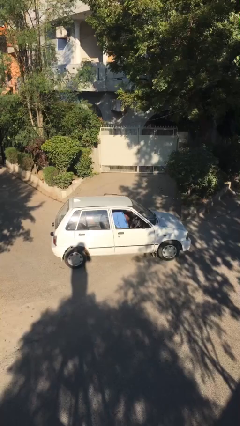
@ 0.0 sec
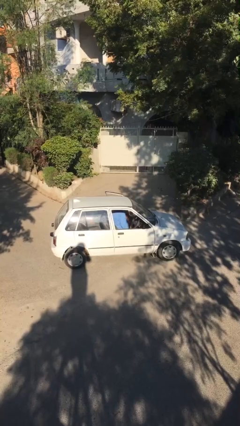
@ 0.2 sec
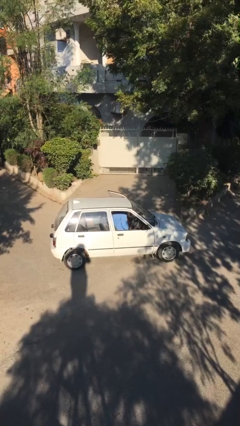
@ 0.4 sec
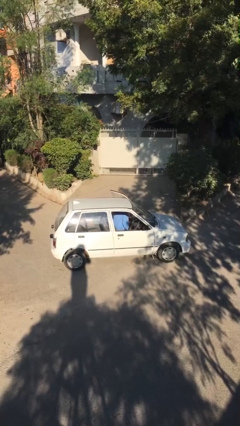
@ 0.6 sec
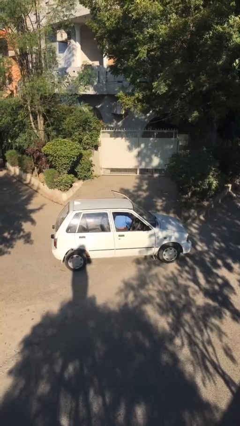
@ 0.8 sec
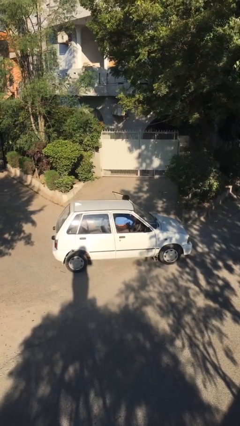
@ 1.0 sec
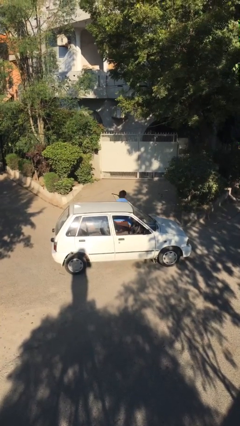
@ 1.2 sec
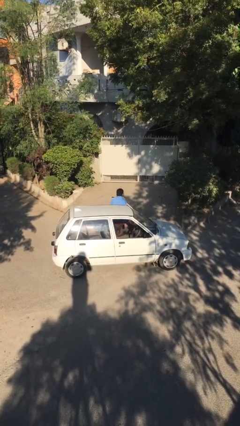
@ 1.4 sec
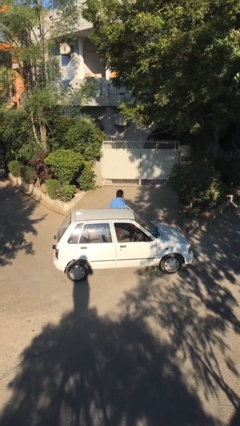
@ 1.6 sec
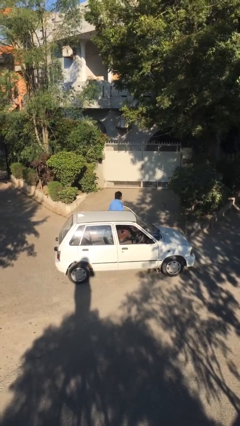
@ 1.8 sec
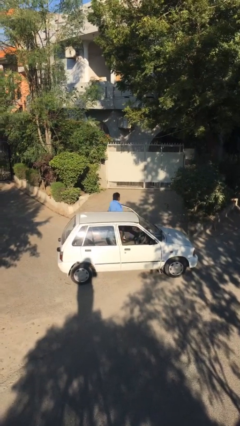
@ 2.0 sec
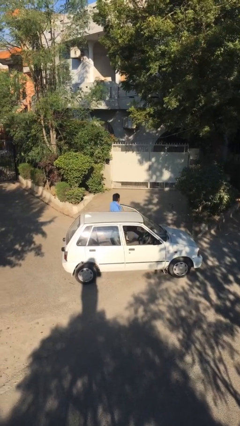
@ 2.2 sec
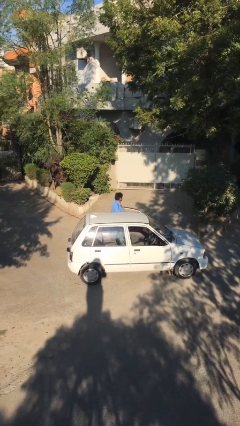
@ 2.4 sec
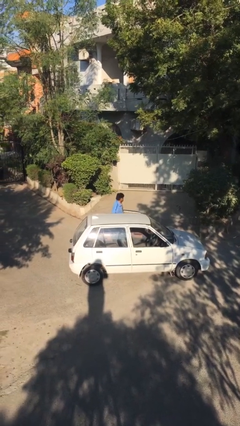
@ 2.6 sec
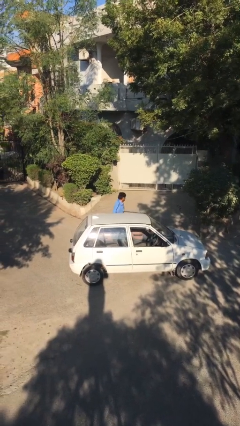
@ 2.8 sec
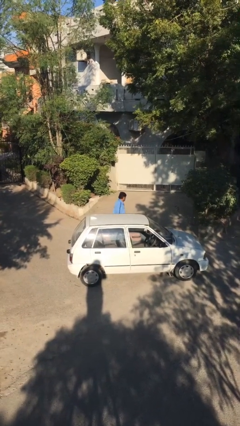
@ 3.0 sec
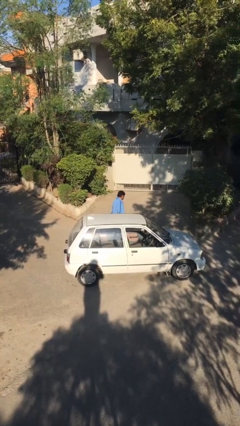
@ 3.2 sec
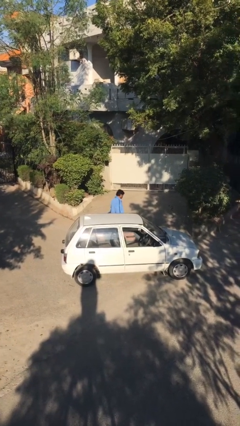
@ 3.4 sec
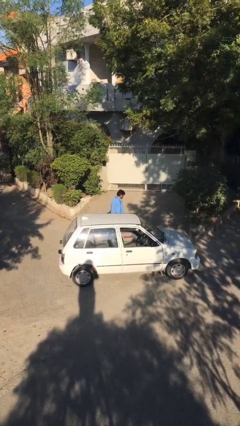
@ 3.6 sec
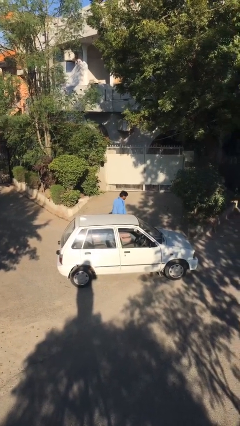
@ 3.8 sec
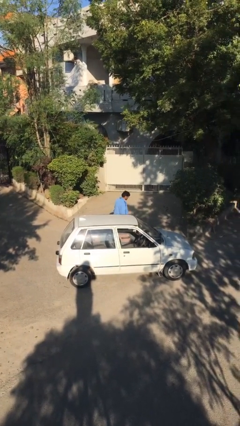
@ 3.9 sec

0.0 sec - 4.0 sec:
person exits car

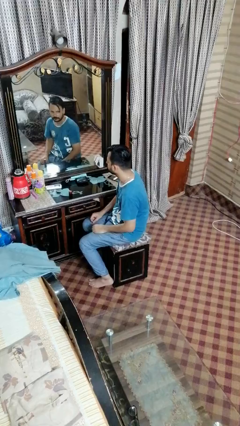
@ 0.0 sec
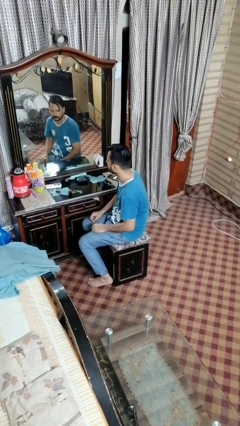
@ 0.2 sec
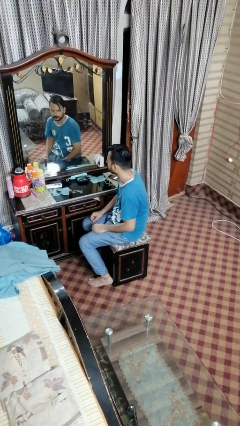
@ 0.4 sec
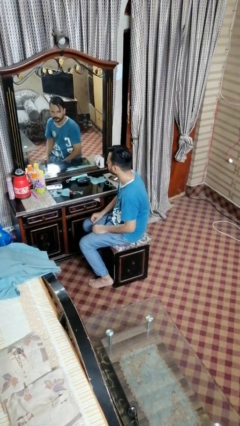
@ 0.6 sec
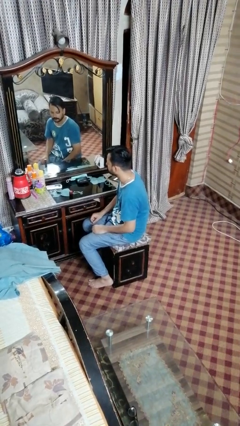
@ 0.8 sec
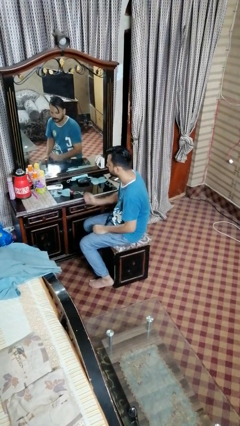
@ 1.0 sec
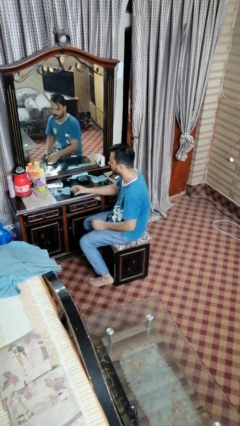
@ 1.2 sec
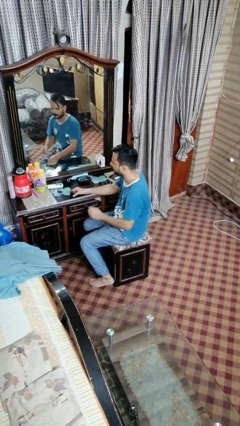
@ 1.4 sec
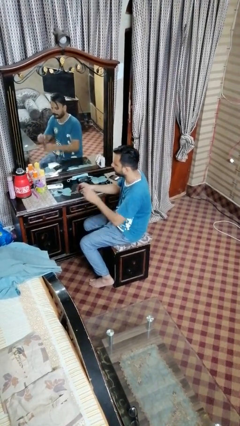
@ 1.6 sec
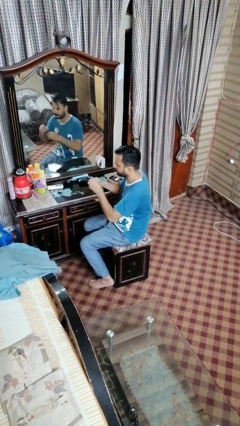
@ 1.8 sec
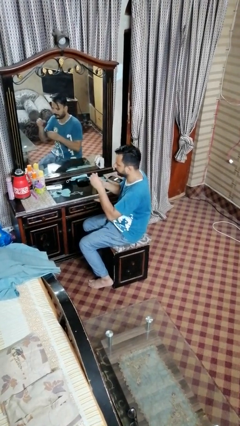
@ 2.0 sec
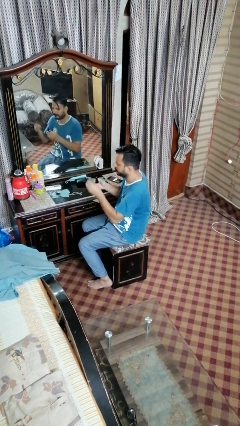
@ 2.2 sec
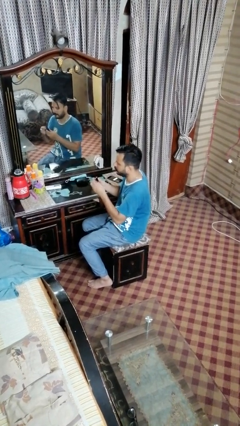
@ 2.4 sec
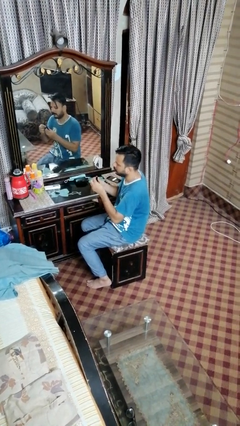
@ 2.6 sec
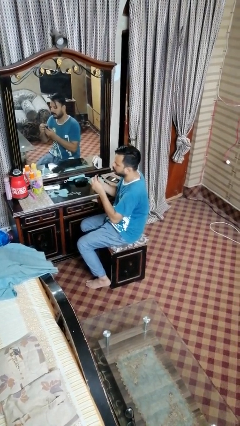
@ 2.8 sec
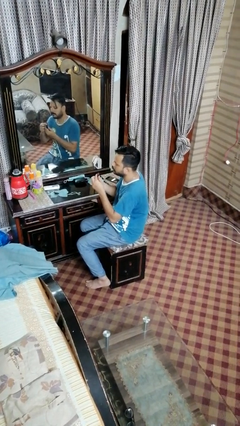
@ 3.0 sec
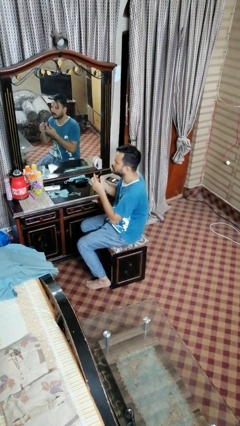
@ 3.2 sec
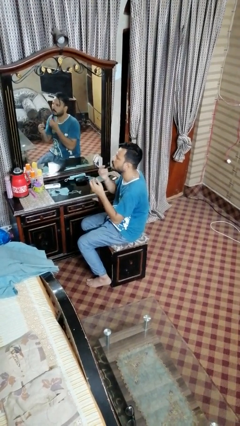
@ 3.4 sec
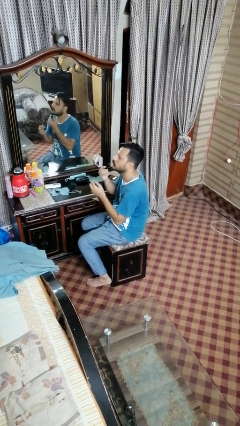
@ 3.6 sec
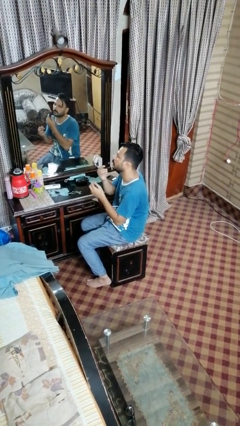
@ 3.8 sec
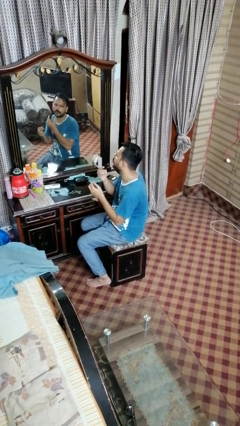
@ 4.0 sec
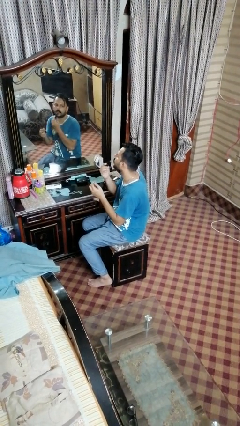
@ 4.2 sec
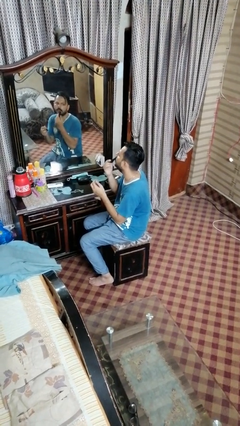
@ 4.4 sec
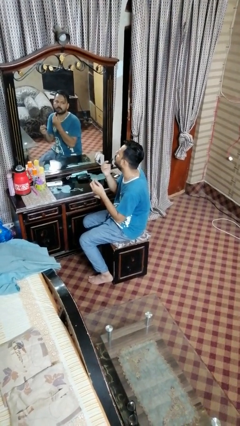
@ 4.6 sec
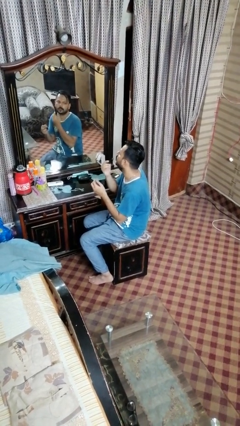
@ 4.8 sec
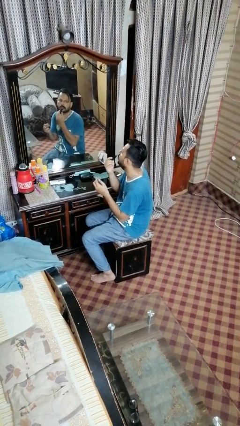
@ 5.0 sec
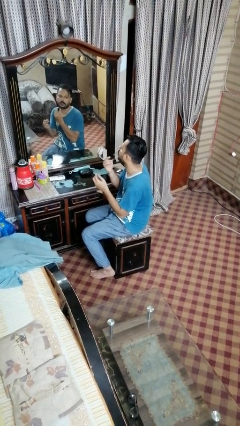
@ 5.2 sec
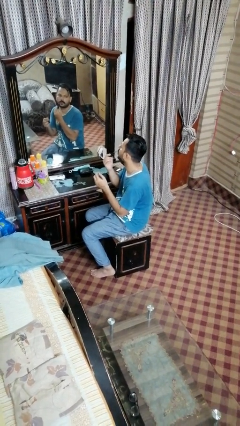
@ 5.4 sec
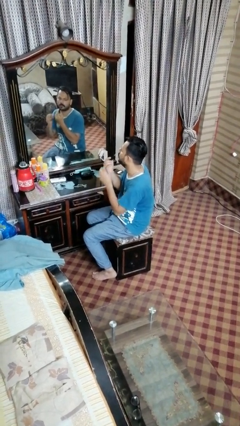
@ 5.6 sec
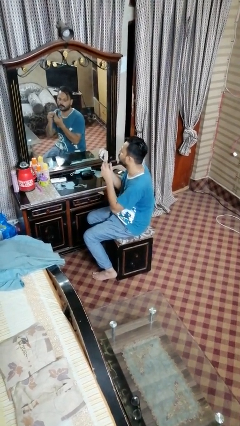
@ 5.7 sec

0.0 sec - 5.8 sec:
person applies lip makeup

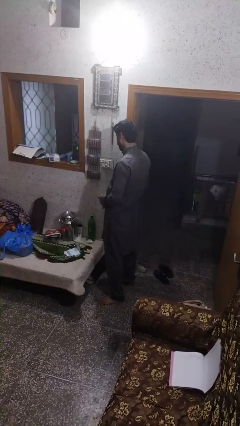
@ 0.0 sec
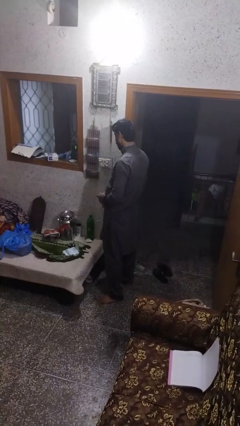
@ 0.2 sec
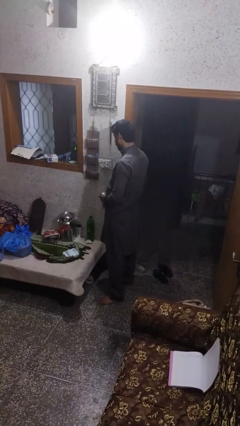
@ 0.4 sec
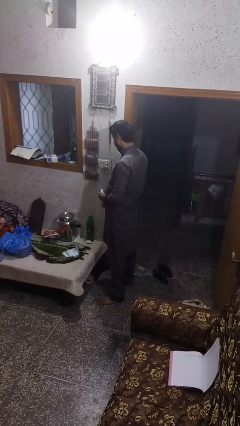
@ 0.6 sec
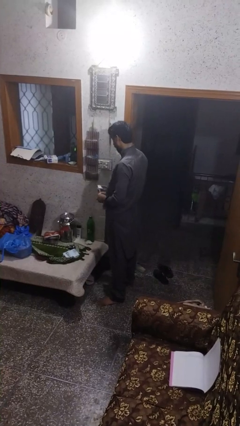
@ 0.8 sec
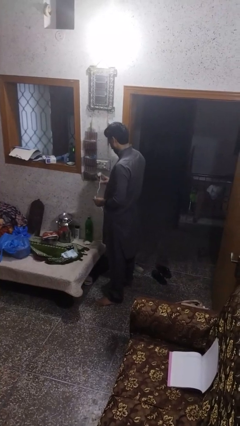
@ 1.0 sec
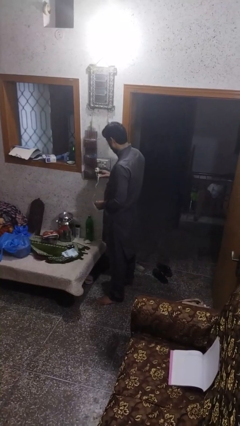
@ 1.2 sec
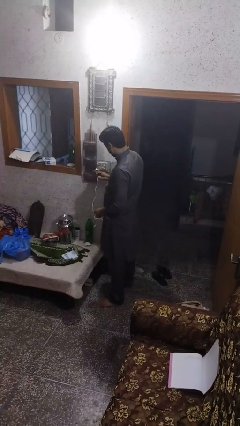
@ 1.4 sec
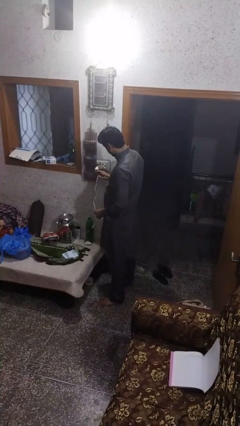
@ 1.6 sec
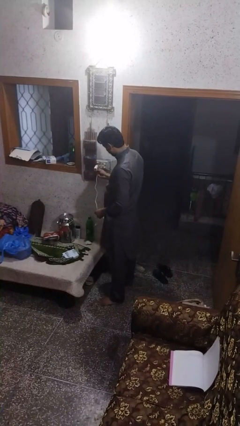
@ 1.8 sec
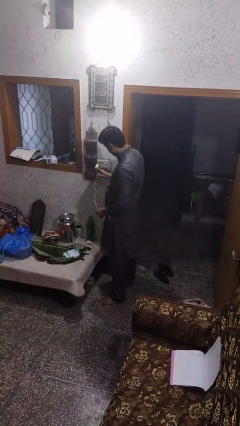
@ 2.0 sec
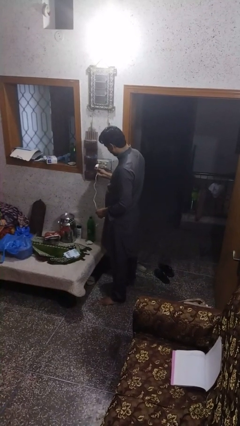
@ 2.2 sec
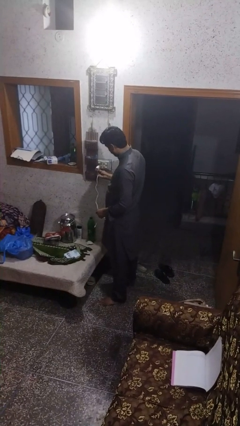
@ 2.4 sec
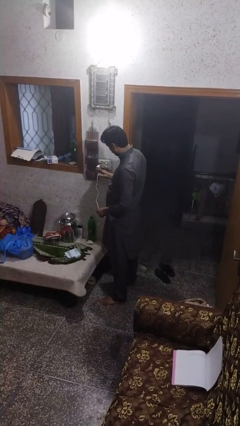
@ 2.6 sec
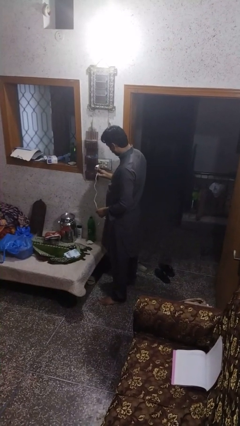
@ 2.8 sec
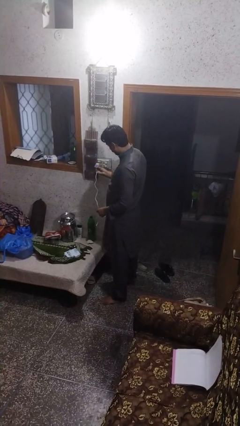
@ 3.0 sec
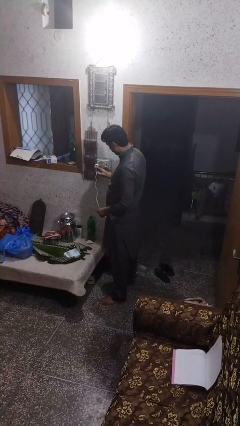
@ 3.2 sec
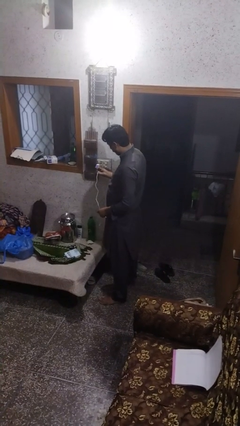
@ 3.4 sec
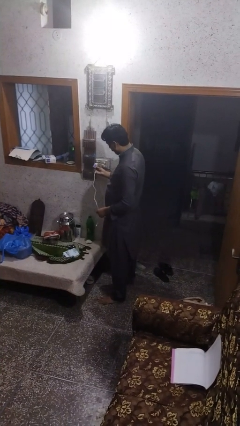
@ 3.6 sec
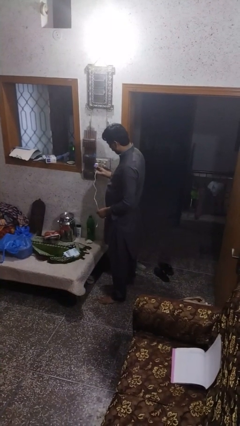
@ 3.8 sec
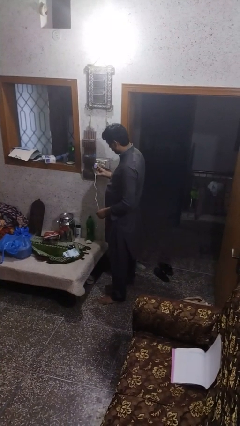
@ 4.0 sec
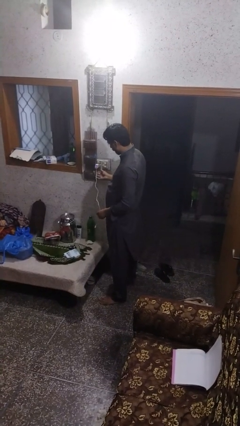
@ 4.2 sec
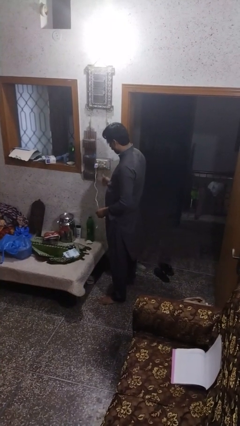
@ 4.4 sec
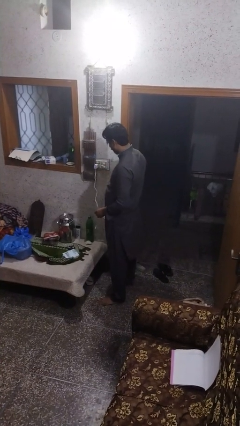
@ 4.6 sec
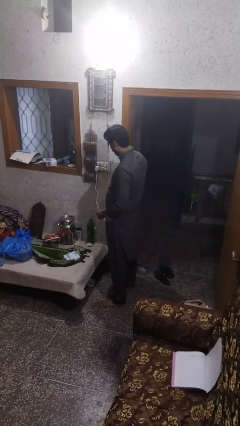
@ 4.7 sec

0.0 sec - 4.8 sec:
person plugs into electrical socket

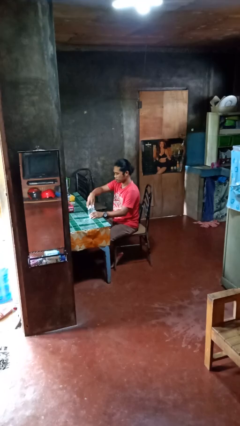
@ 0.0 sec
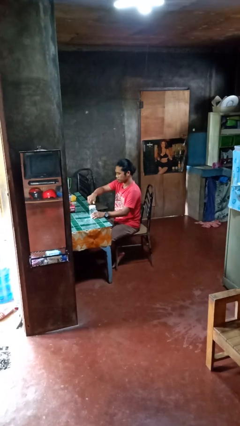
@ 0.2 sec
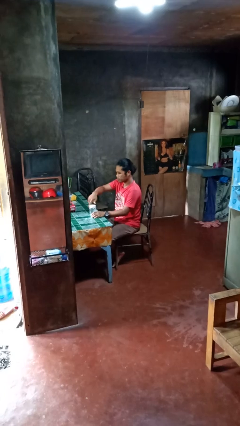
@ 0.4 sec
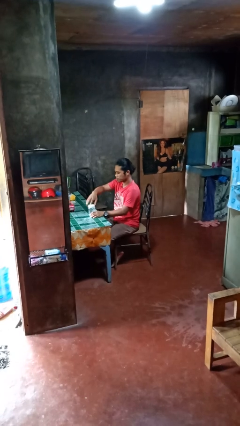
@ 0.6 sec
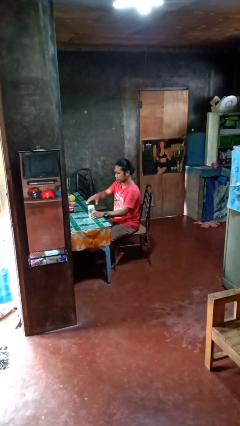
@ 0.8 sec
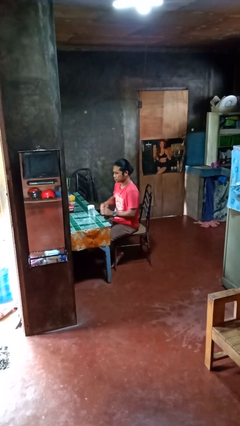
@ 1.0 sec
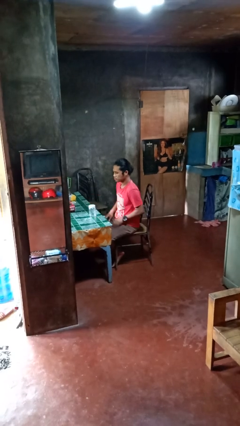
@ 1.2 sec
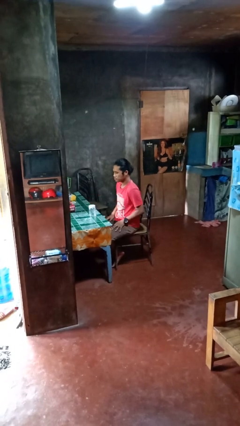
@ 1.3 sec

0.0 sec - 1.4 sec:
person closes jar

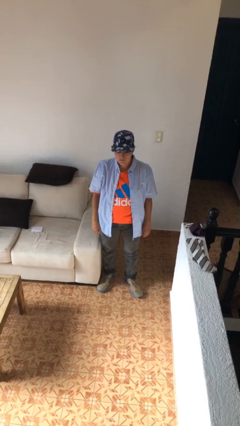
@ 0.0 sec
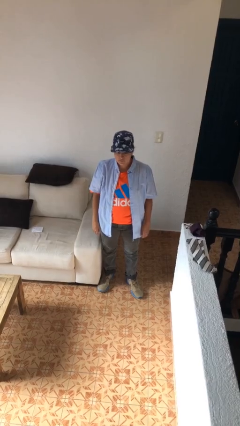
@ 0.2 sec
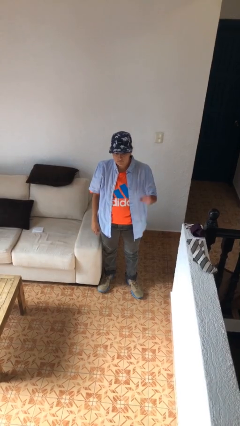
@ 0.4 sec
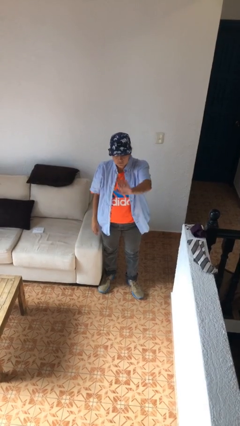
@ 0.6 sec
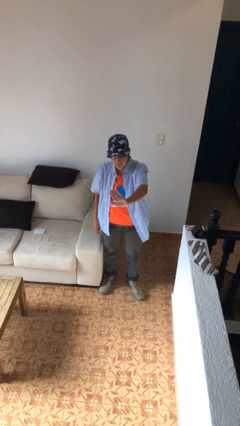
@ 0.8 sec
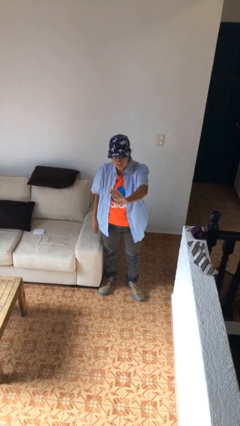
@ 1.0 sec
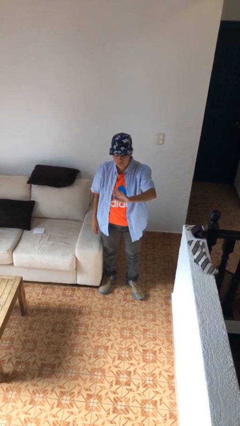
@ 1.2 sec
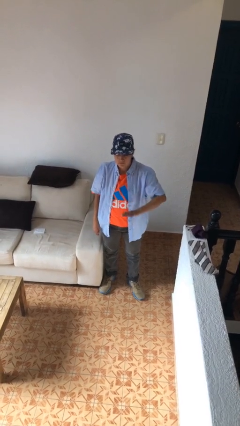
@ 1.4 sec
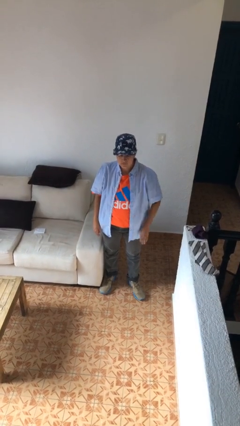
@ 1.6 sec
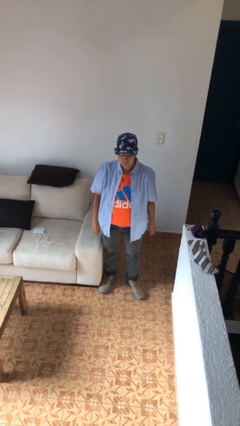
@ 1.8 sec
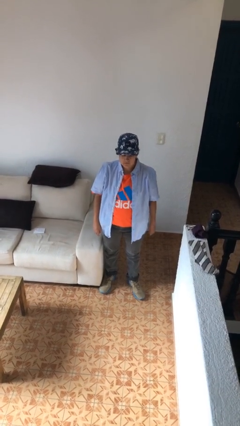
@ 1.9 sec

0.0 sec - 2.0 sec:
person gestures stop
